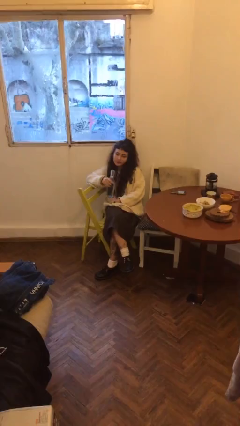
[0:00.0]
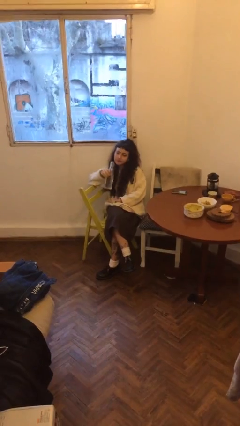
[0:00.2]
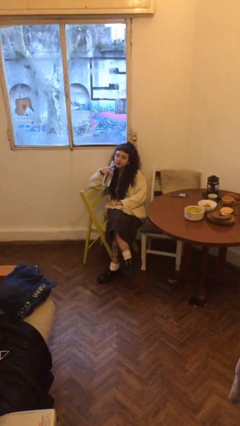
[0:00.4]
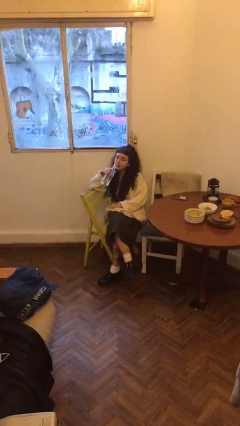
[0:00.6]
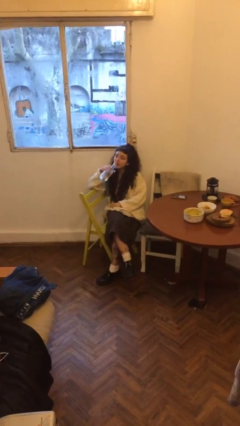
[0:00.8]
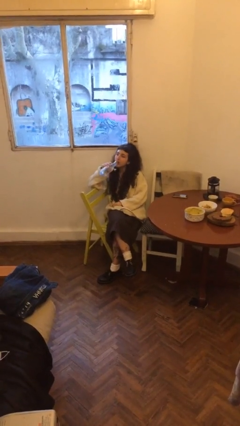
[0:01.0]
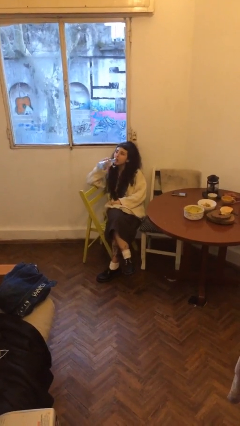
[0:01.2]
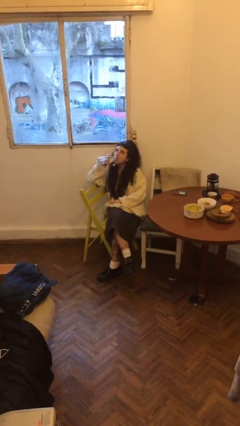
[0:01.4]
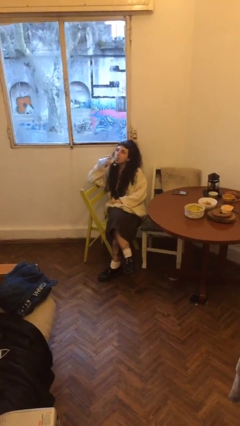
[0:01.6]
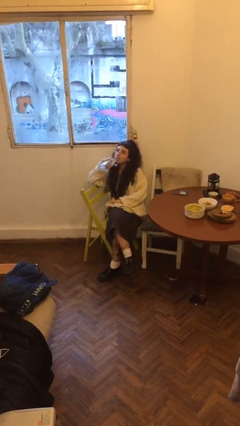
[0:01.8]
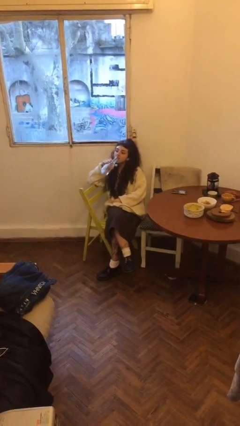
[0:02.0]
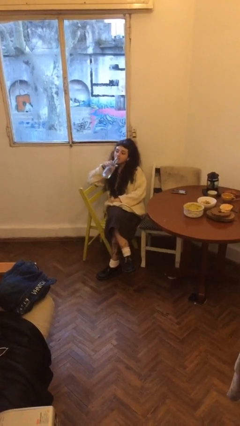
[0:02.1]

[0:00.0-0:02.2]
person drinks from bottle

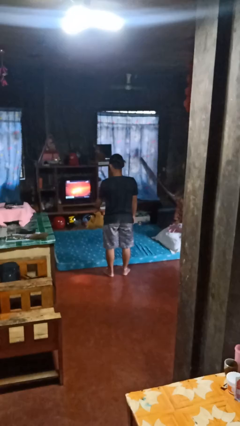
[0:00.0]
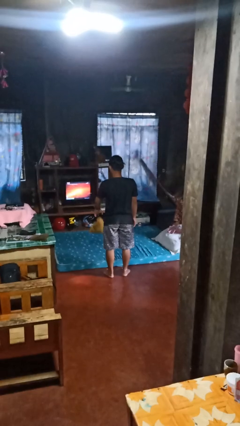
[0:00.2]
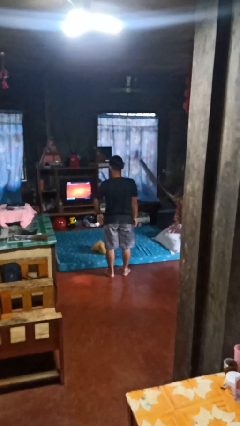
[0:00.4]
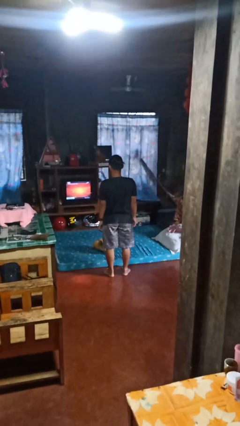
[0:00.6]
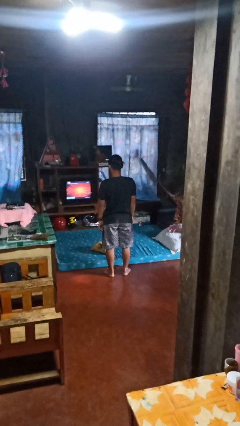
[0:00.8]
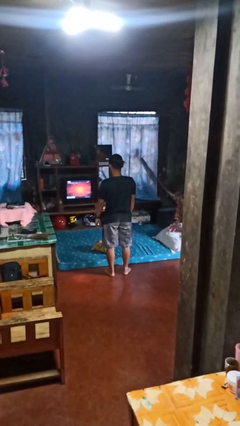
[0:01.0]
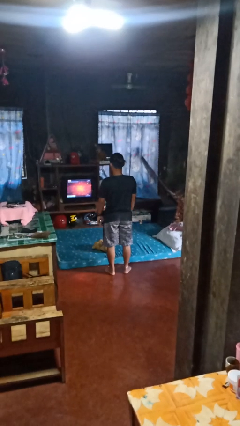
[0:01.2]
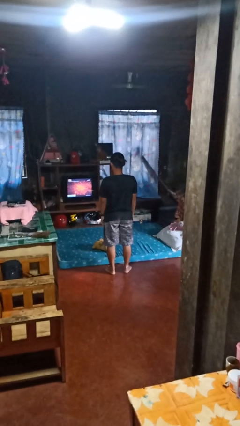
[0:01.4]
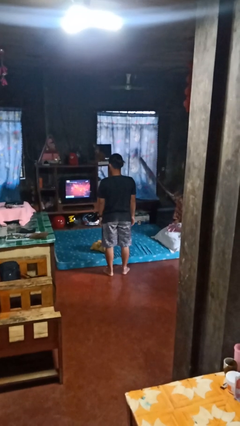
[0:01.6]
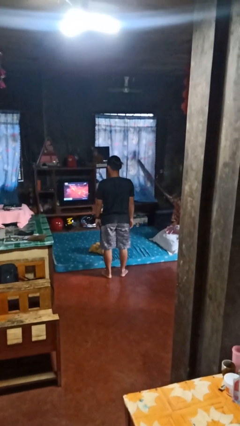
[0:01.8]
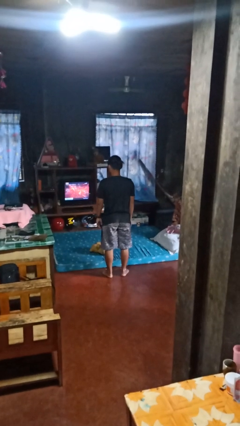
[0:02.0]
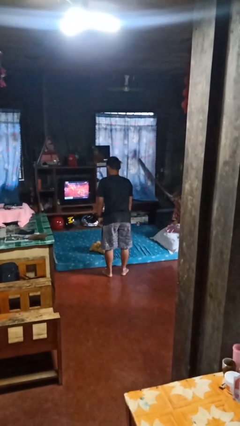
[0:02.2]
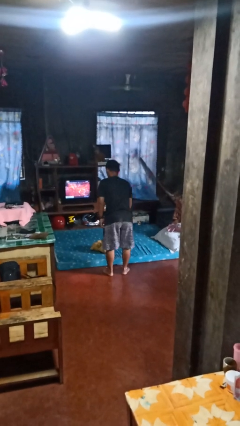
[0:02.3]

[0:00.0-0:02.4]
person throws object on bed

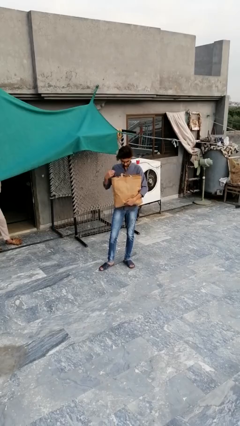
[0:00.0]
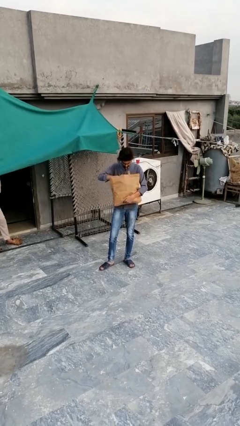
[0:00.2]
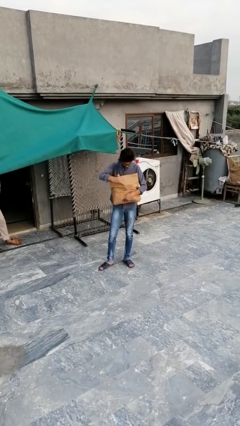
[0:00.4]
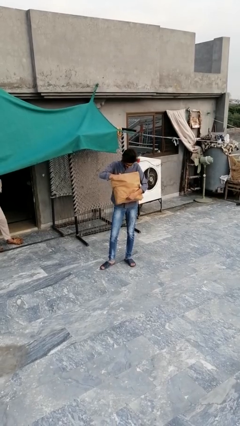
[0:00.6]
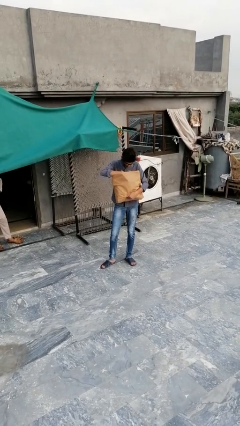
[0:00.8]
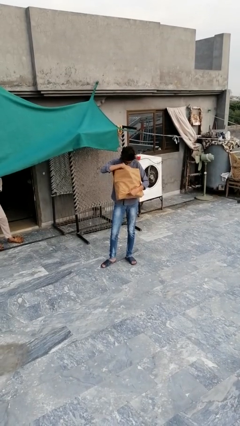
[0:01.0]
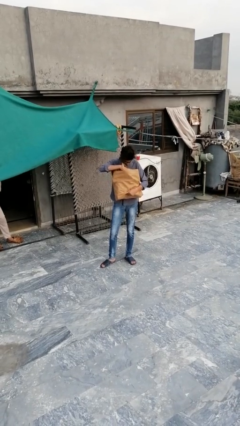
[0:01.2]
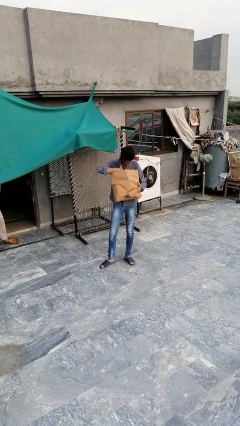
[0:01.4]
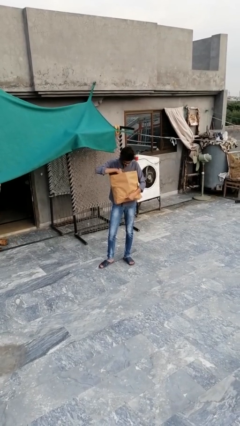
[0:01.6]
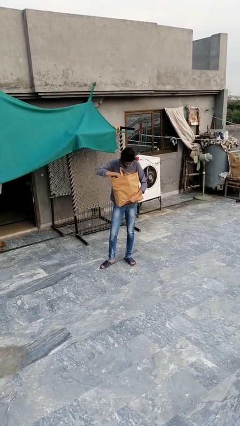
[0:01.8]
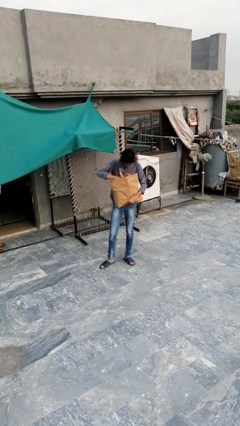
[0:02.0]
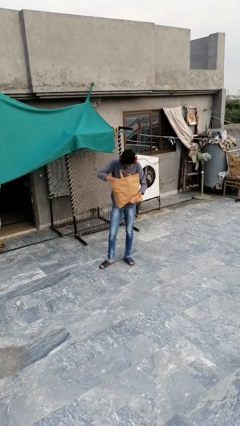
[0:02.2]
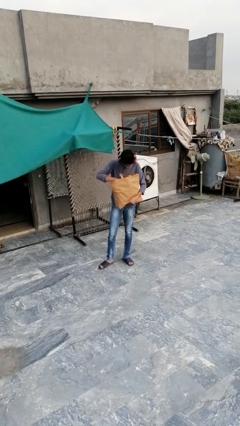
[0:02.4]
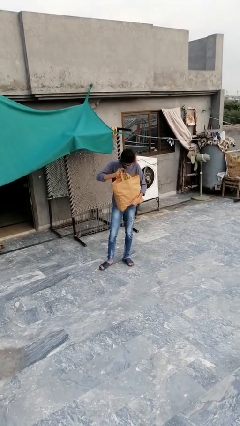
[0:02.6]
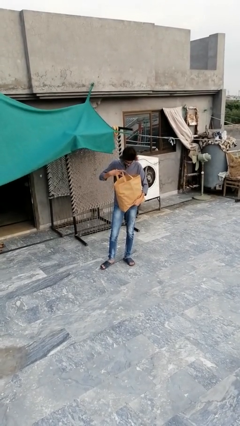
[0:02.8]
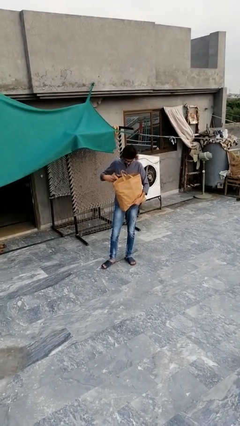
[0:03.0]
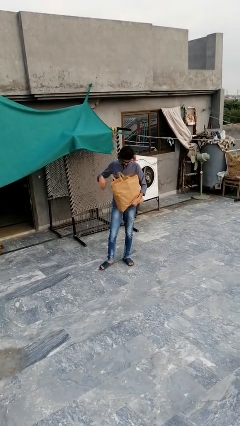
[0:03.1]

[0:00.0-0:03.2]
person searches in bag

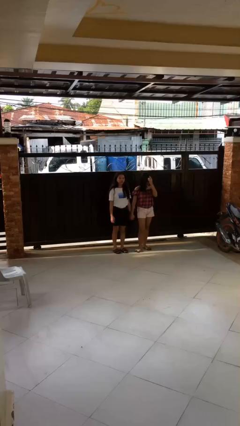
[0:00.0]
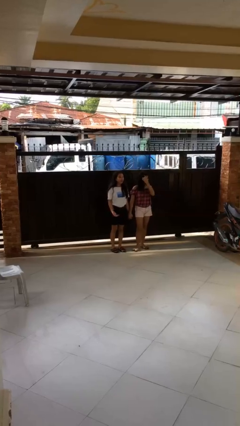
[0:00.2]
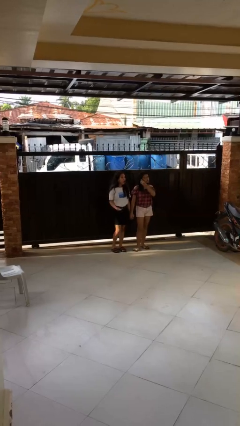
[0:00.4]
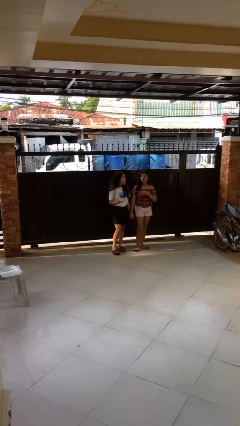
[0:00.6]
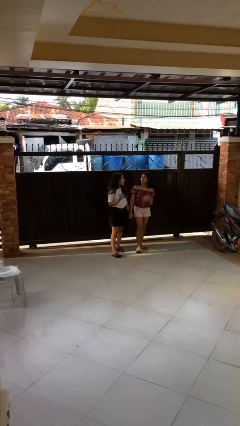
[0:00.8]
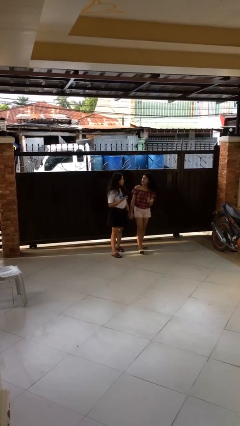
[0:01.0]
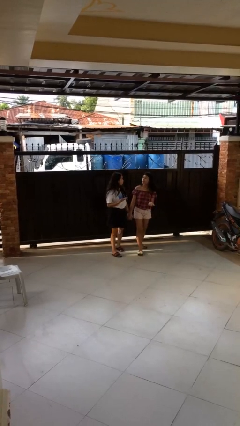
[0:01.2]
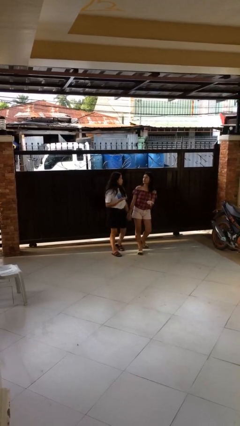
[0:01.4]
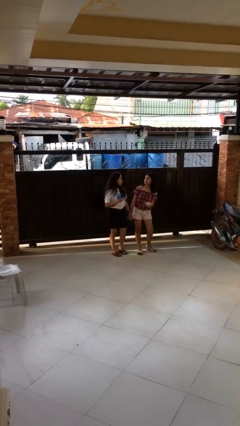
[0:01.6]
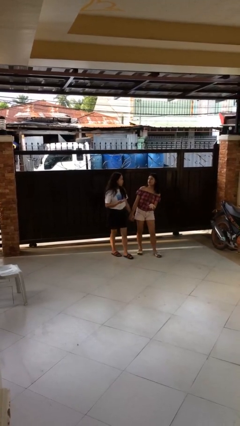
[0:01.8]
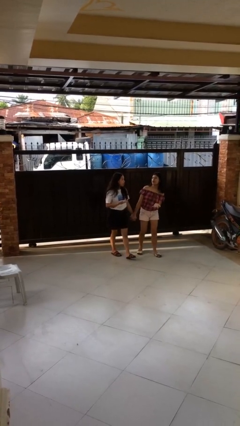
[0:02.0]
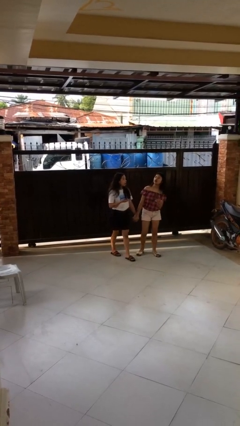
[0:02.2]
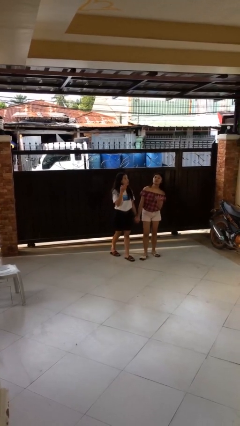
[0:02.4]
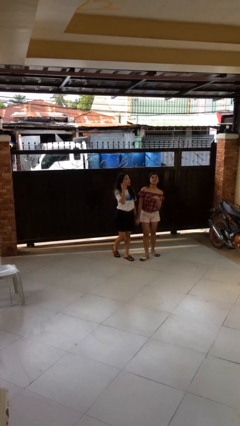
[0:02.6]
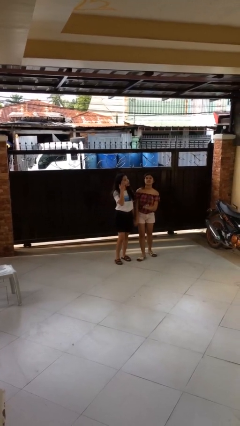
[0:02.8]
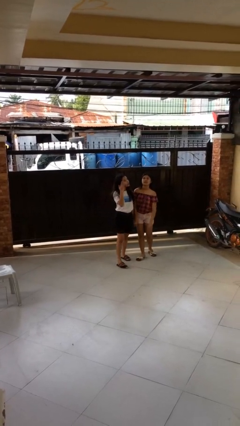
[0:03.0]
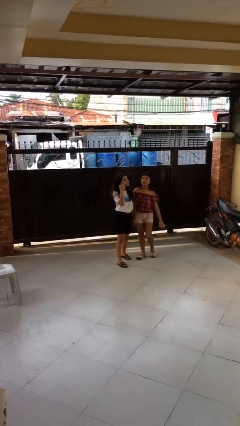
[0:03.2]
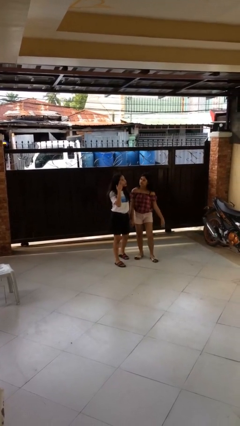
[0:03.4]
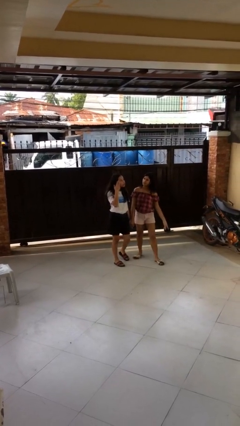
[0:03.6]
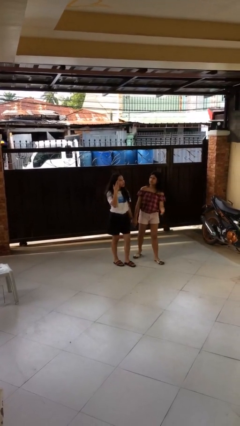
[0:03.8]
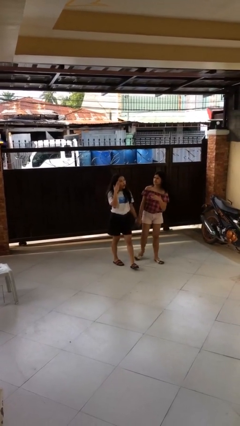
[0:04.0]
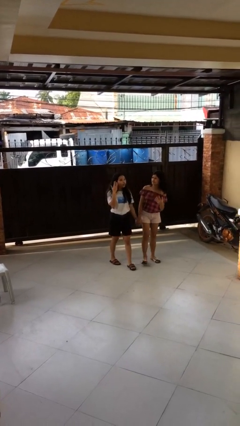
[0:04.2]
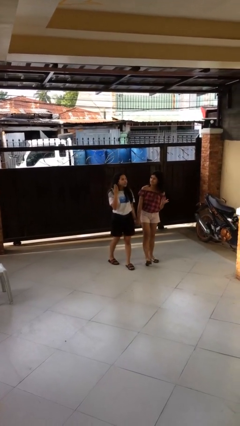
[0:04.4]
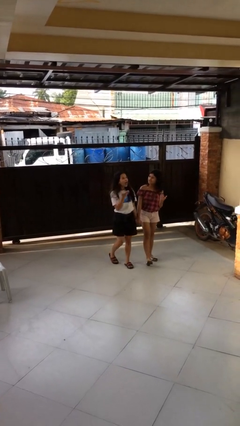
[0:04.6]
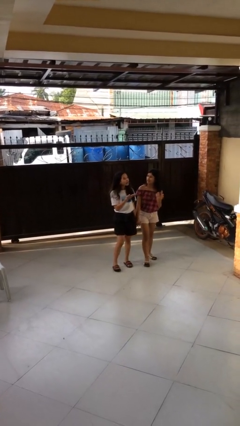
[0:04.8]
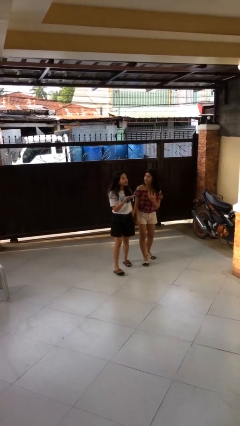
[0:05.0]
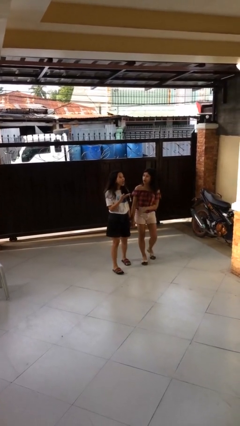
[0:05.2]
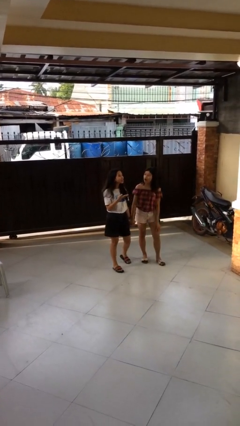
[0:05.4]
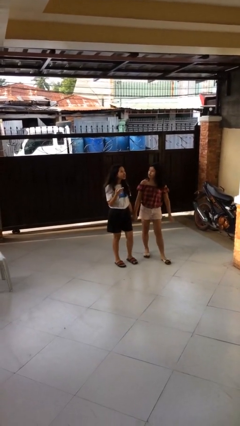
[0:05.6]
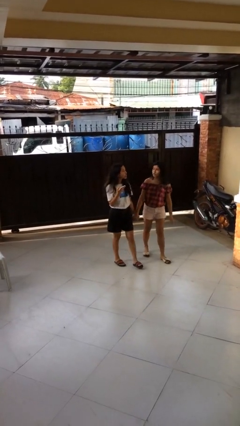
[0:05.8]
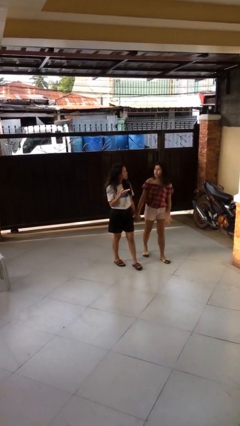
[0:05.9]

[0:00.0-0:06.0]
person holds hand

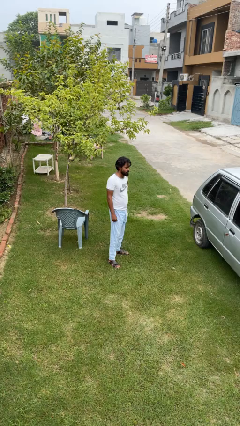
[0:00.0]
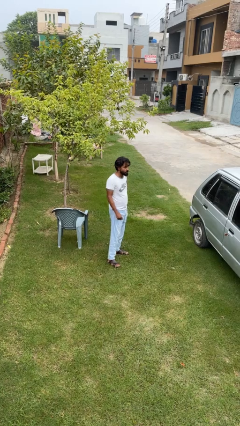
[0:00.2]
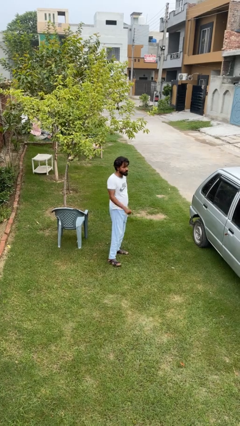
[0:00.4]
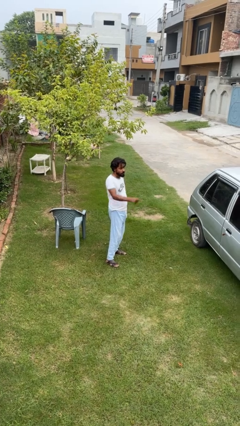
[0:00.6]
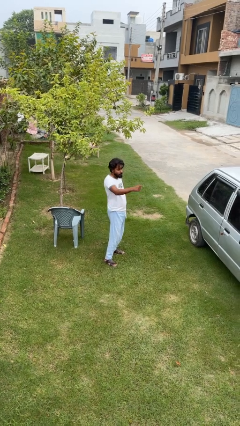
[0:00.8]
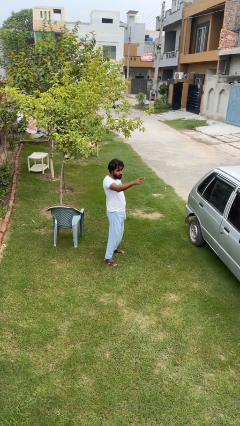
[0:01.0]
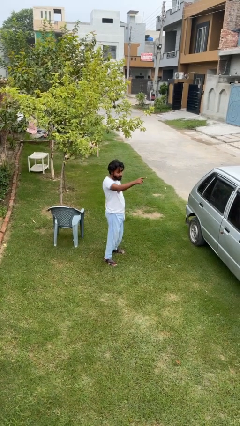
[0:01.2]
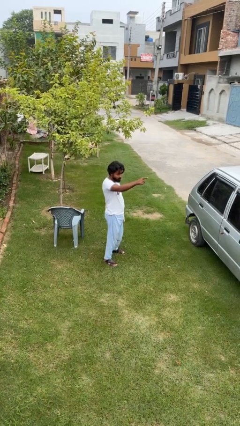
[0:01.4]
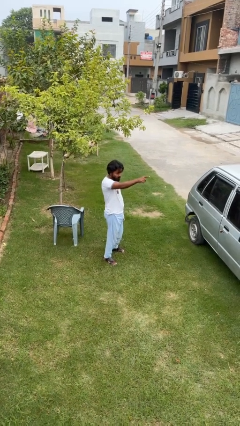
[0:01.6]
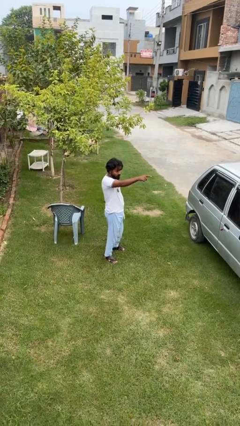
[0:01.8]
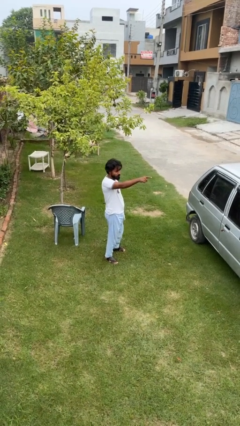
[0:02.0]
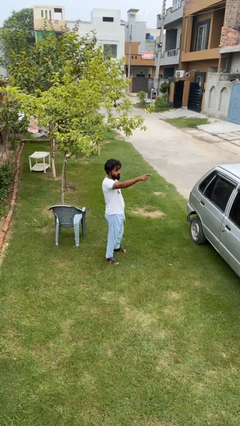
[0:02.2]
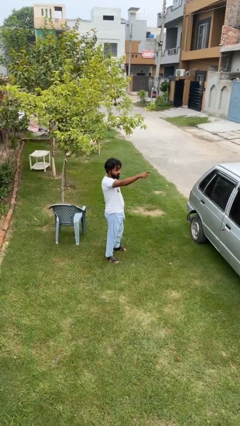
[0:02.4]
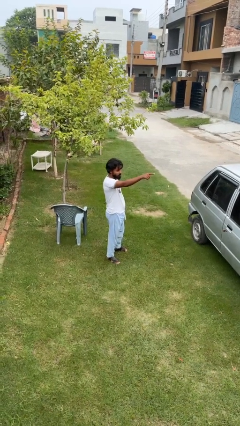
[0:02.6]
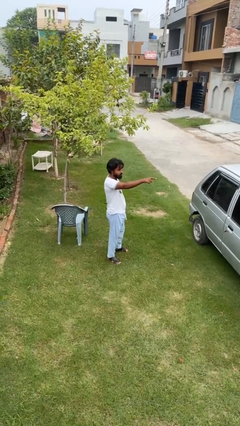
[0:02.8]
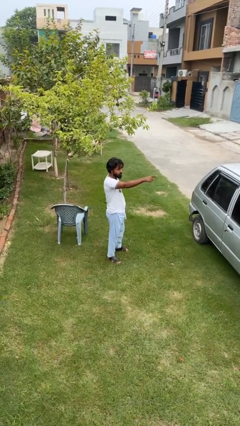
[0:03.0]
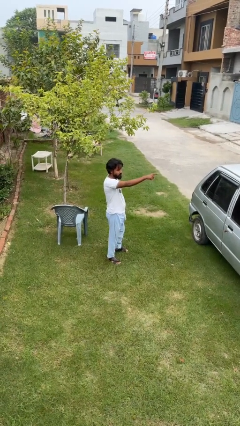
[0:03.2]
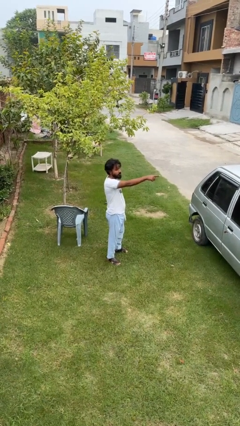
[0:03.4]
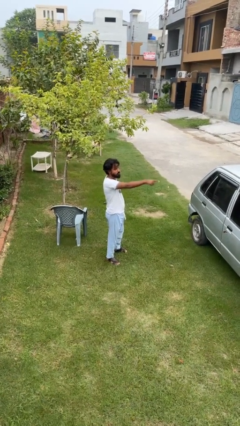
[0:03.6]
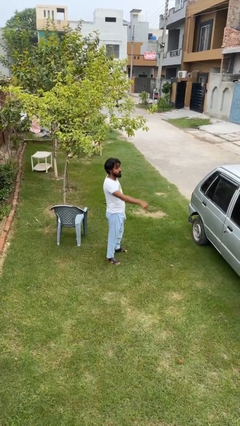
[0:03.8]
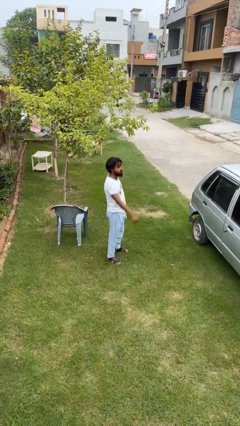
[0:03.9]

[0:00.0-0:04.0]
person points at person
